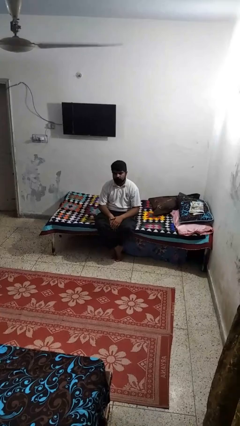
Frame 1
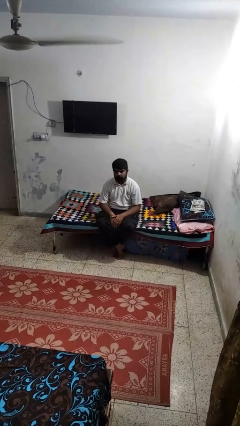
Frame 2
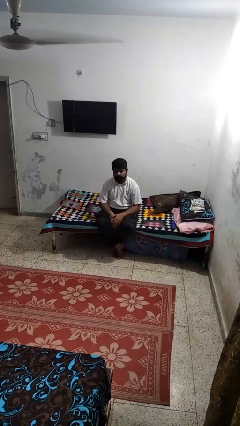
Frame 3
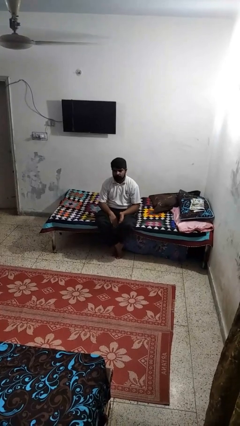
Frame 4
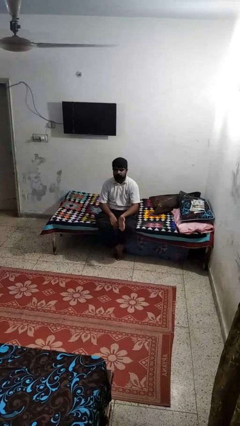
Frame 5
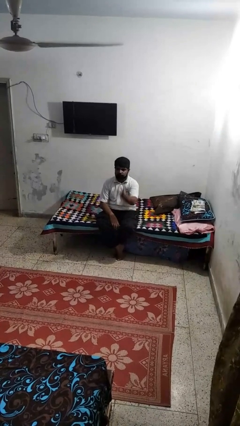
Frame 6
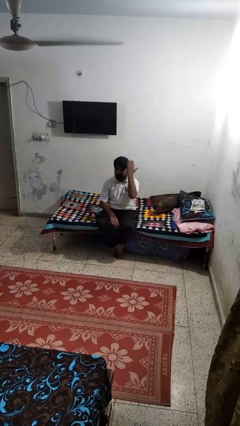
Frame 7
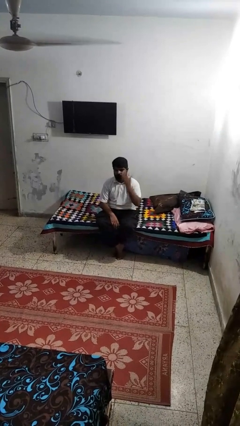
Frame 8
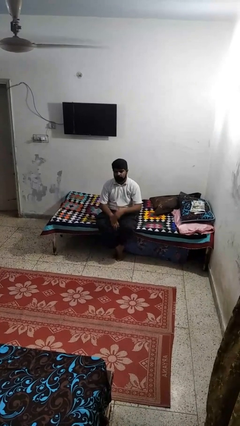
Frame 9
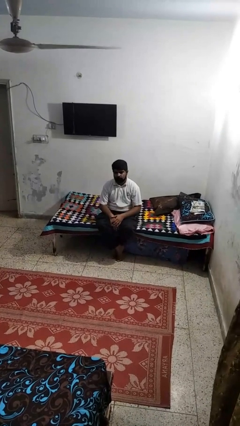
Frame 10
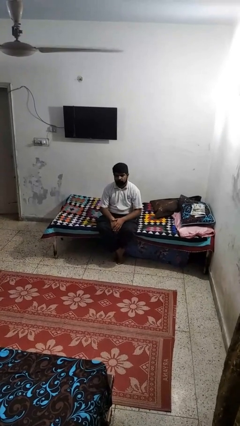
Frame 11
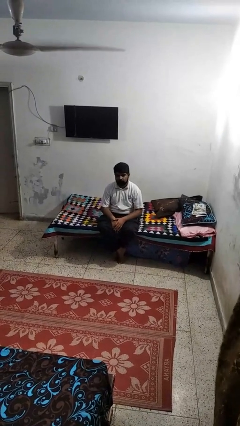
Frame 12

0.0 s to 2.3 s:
person gestures swipe up

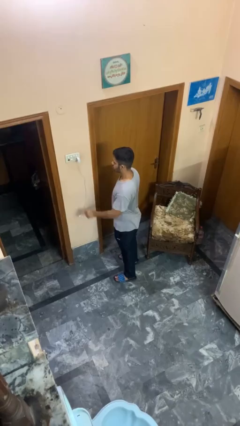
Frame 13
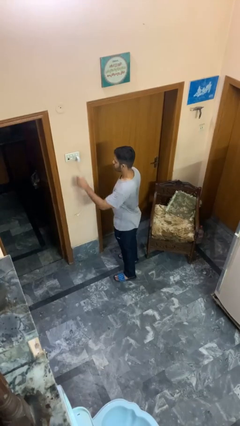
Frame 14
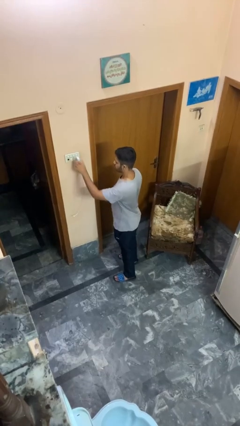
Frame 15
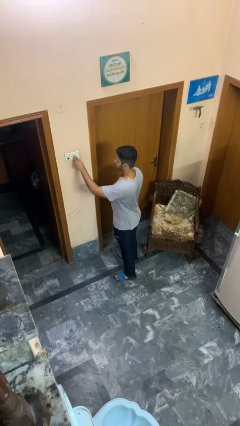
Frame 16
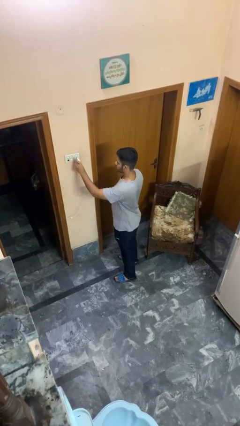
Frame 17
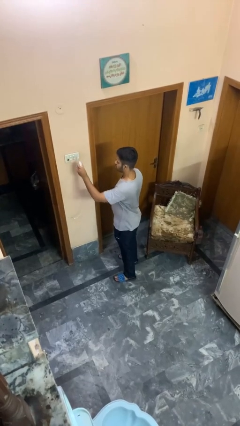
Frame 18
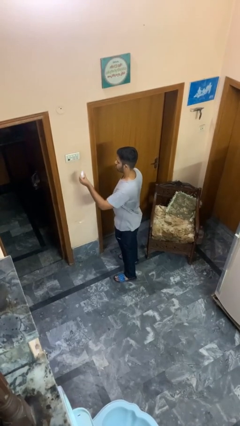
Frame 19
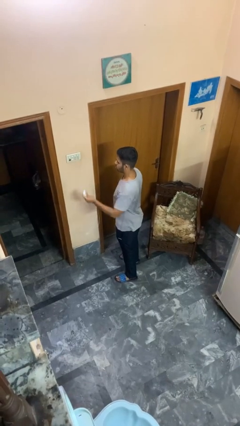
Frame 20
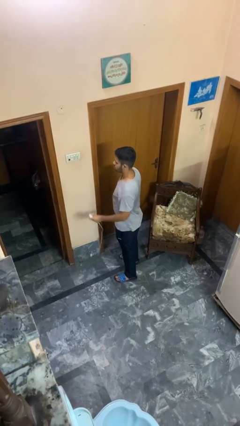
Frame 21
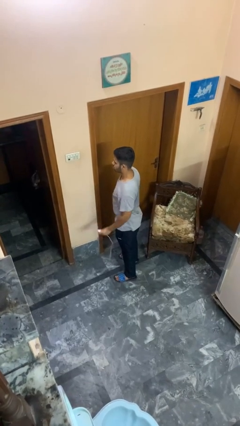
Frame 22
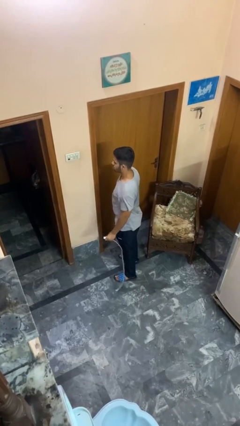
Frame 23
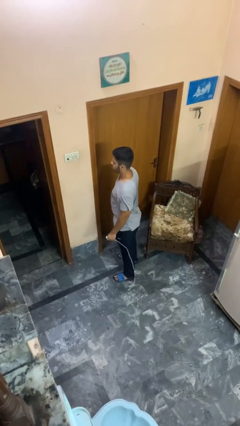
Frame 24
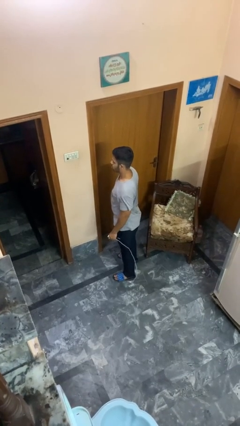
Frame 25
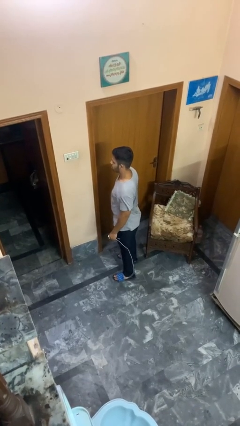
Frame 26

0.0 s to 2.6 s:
person unplugs from electrical socket

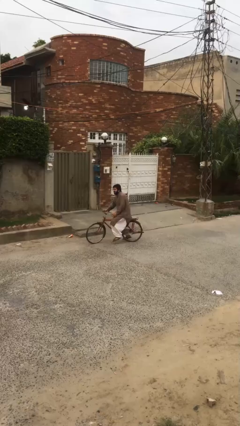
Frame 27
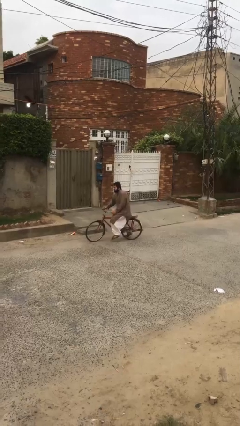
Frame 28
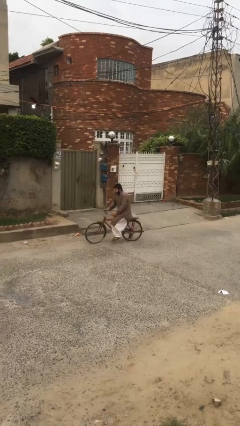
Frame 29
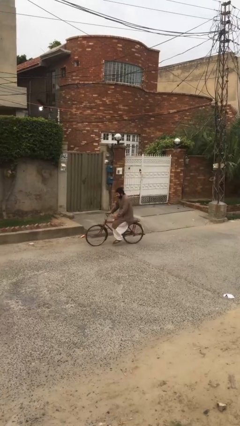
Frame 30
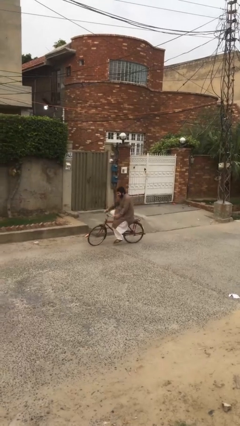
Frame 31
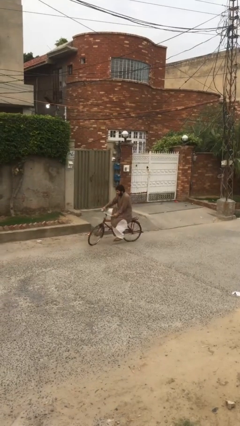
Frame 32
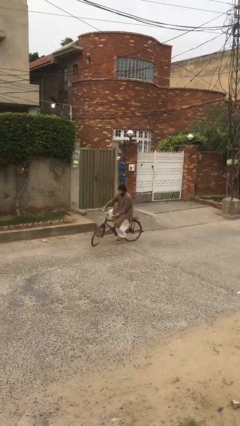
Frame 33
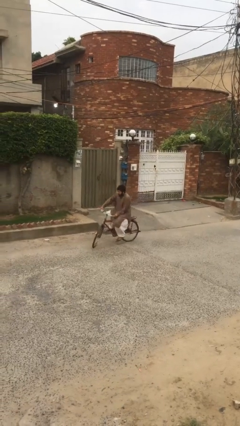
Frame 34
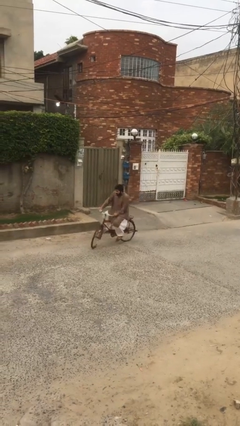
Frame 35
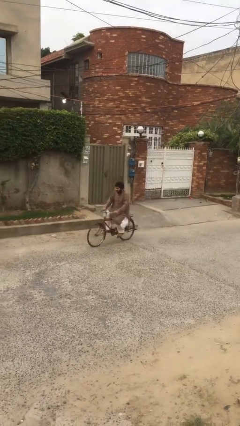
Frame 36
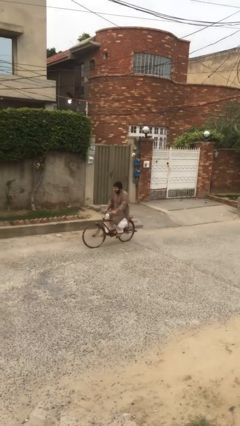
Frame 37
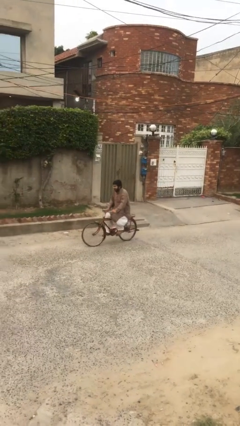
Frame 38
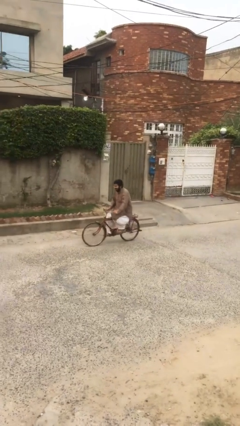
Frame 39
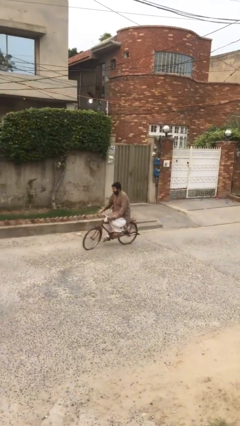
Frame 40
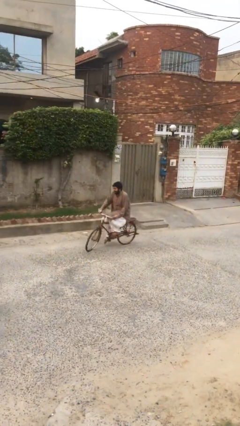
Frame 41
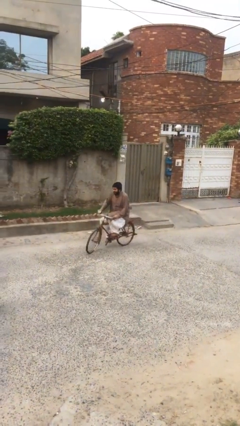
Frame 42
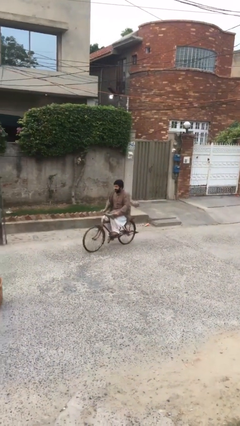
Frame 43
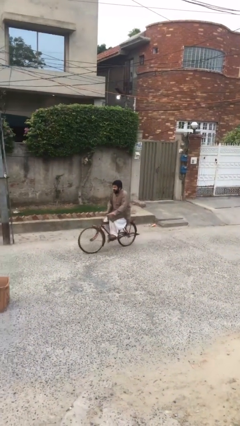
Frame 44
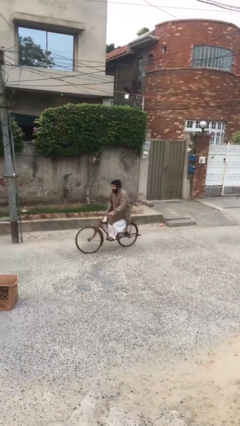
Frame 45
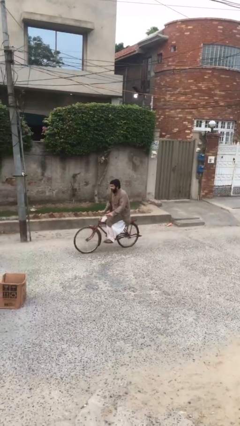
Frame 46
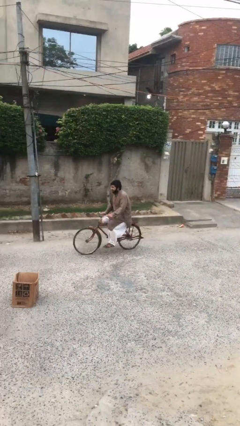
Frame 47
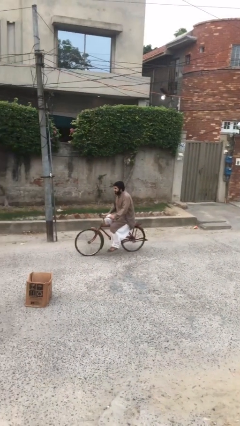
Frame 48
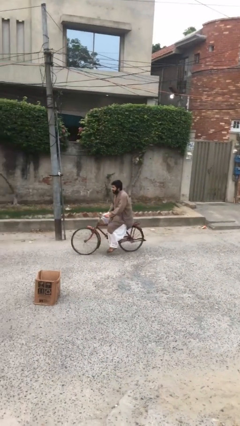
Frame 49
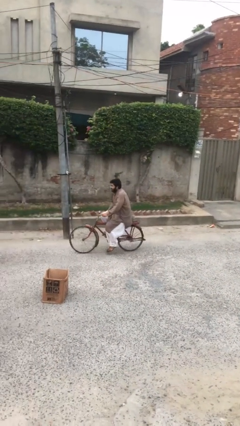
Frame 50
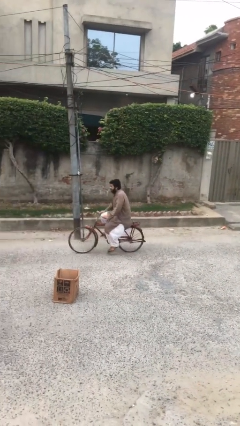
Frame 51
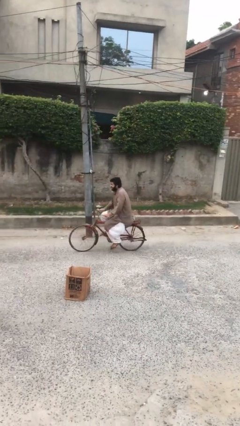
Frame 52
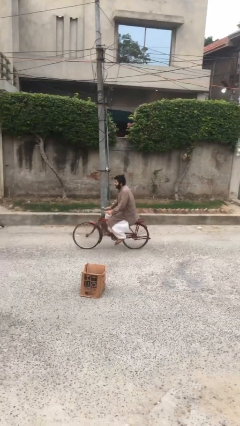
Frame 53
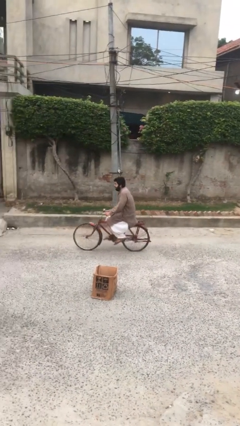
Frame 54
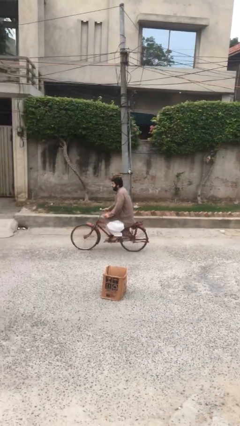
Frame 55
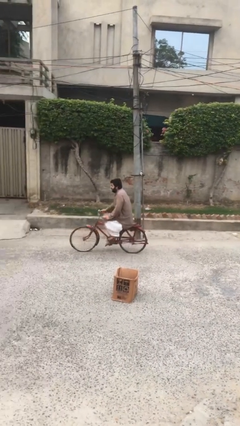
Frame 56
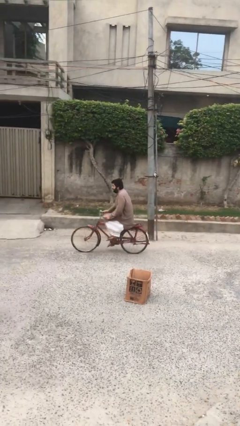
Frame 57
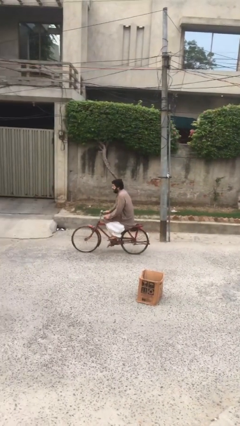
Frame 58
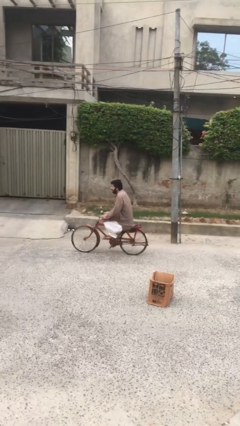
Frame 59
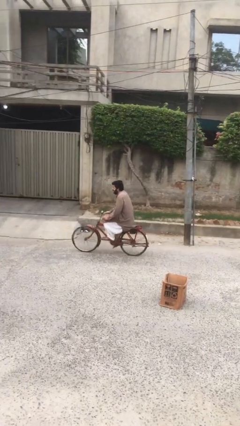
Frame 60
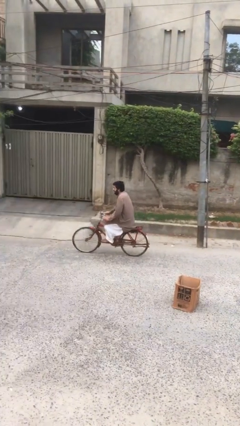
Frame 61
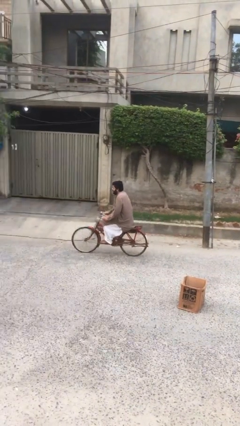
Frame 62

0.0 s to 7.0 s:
person rides bicycle

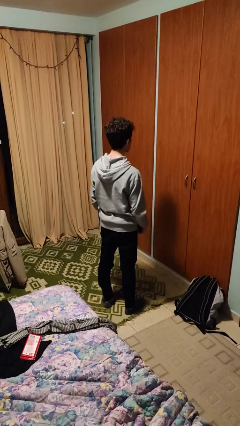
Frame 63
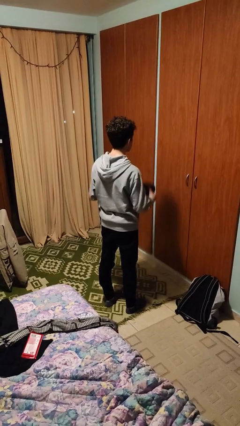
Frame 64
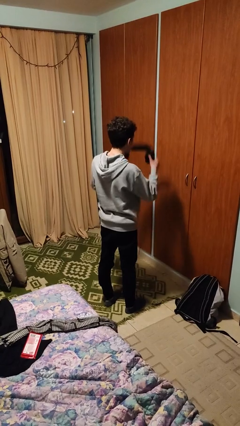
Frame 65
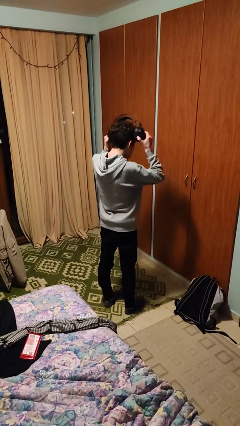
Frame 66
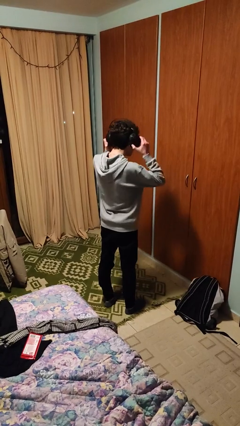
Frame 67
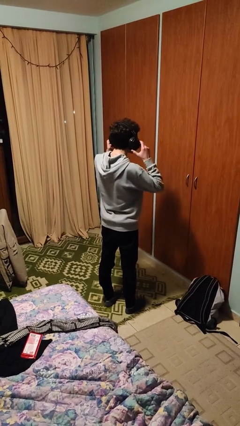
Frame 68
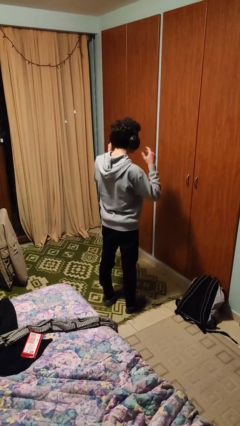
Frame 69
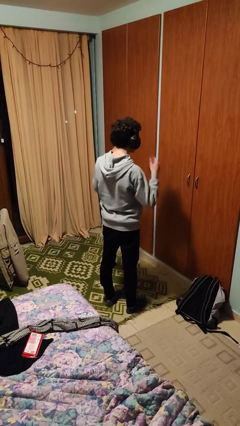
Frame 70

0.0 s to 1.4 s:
person puts on headphones

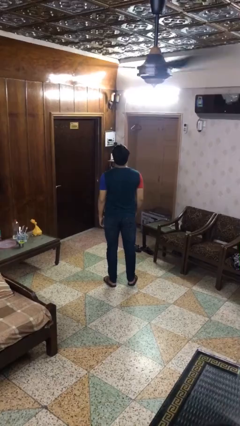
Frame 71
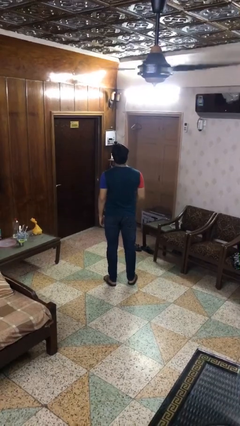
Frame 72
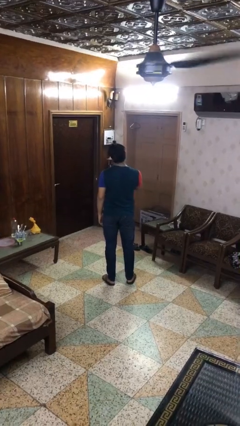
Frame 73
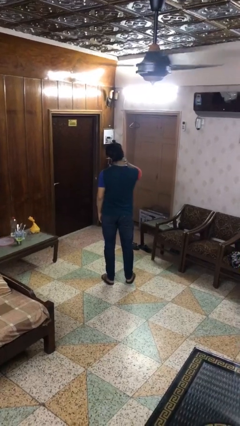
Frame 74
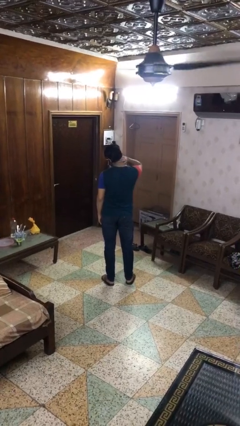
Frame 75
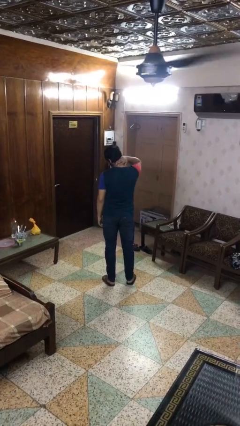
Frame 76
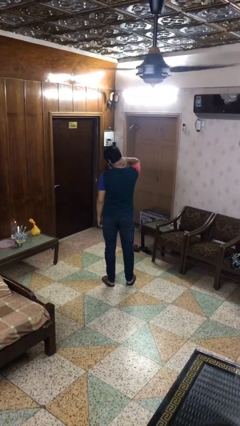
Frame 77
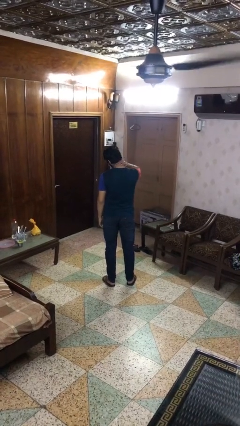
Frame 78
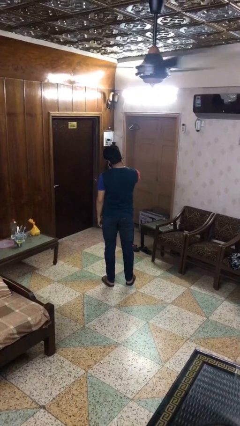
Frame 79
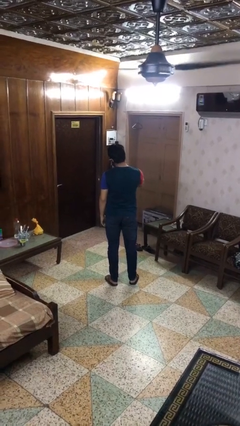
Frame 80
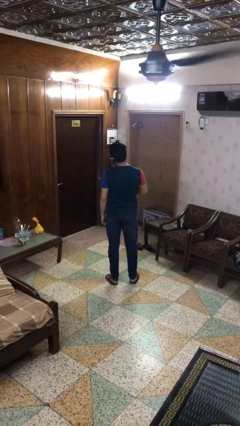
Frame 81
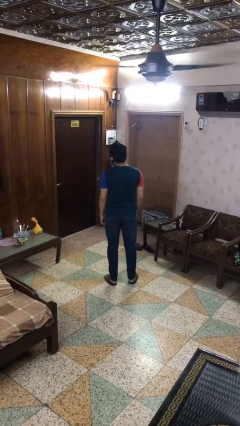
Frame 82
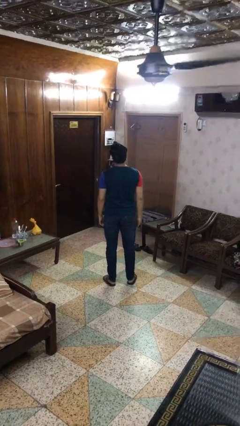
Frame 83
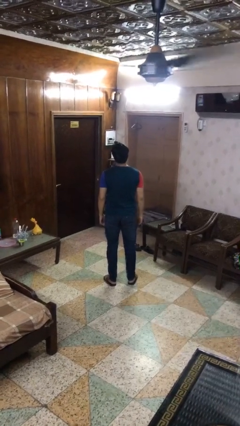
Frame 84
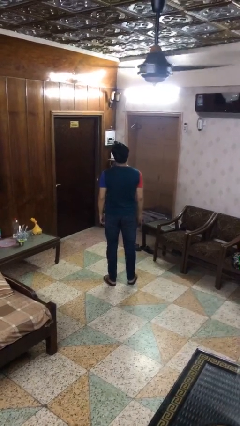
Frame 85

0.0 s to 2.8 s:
person rubs neck

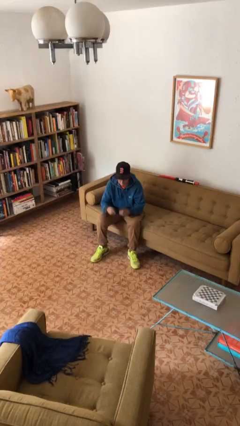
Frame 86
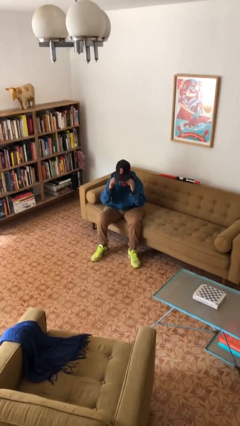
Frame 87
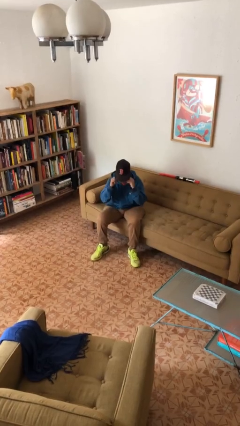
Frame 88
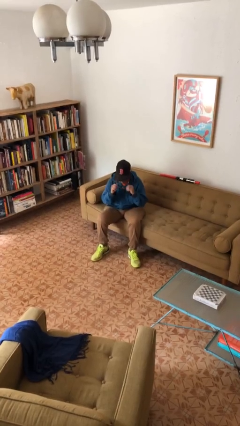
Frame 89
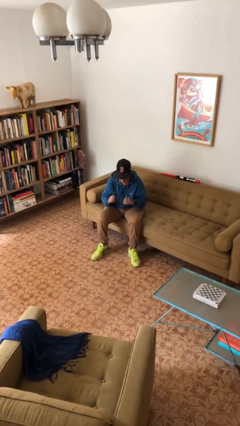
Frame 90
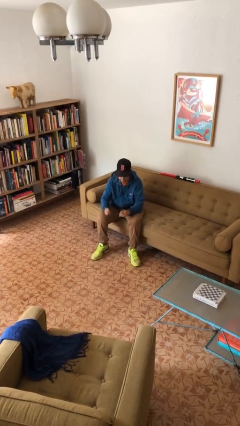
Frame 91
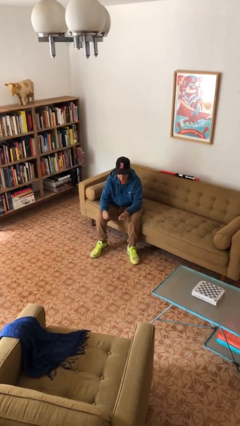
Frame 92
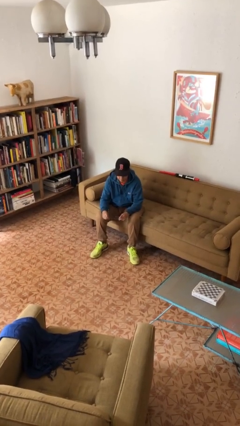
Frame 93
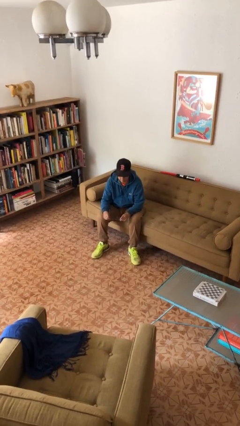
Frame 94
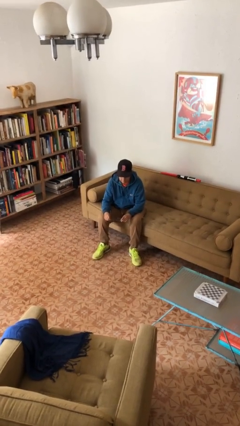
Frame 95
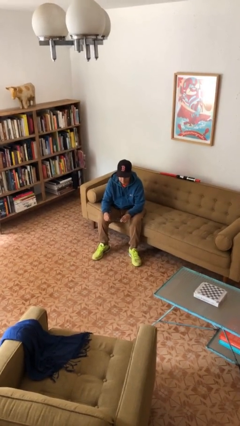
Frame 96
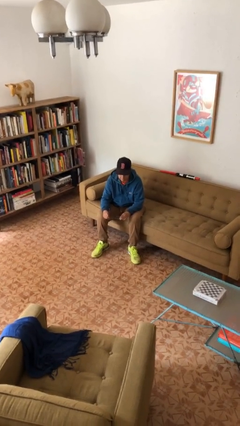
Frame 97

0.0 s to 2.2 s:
person takes off glasses
